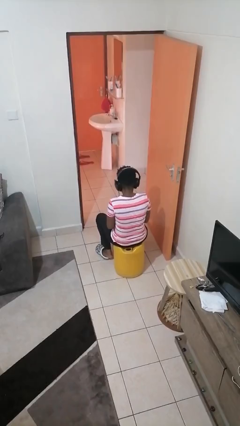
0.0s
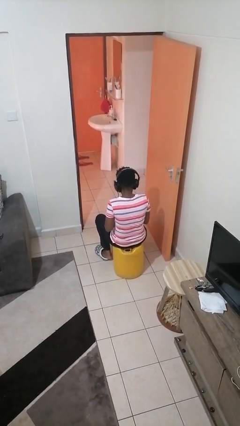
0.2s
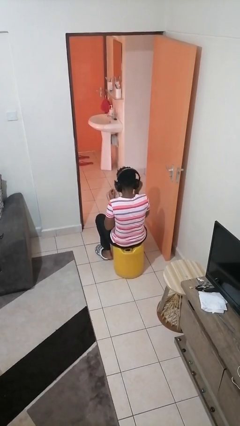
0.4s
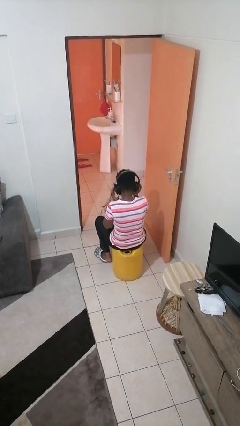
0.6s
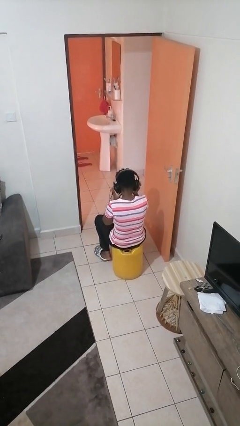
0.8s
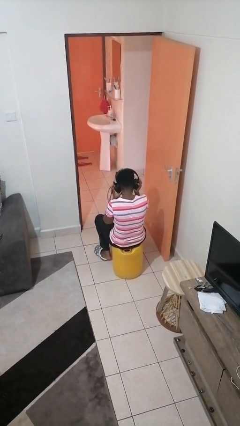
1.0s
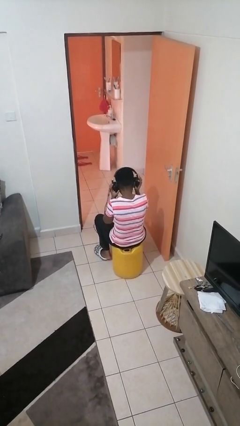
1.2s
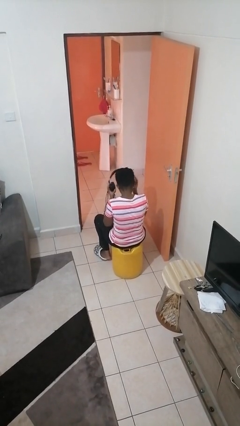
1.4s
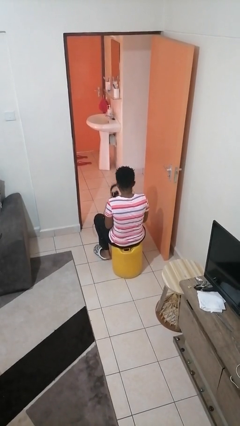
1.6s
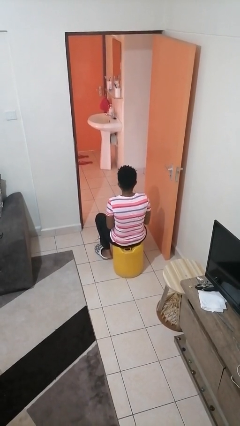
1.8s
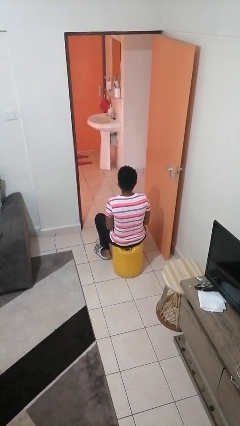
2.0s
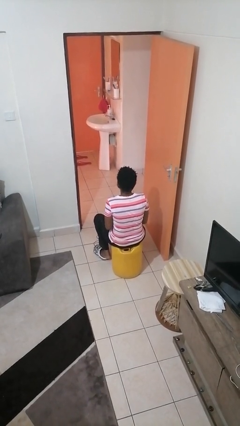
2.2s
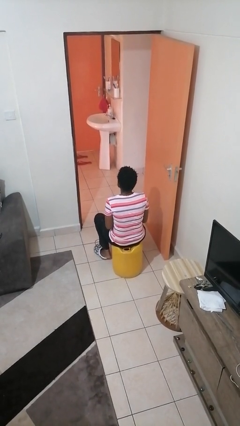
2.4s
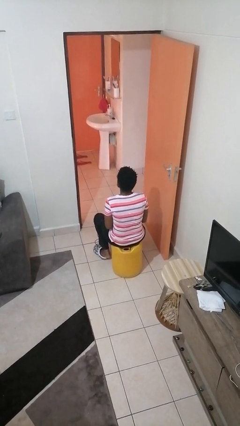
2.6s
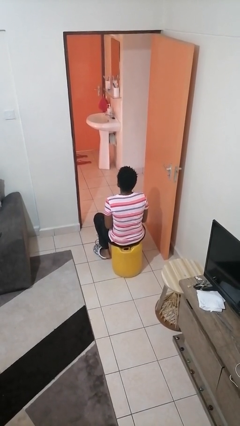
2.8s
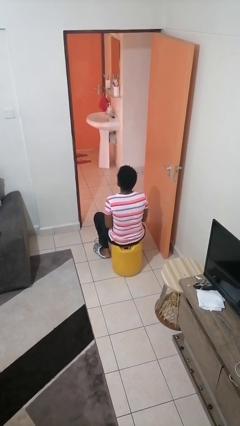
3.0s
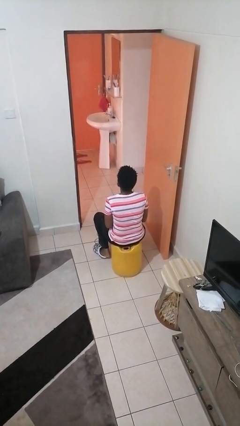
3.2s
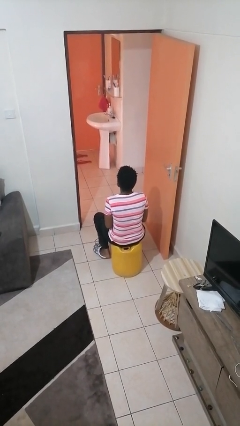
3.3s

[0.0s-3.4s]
person takes off headphones

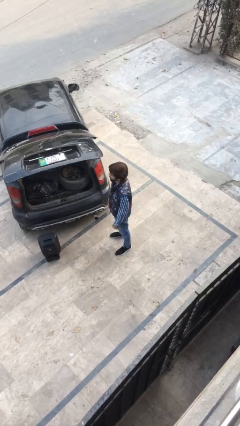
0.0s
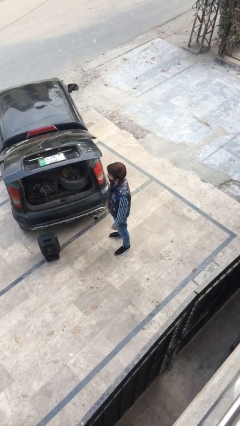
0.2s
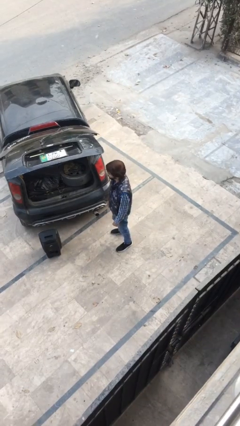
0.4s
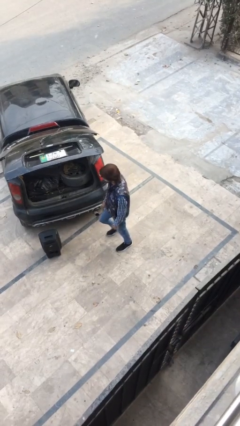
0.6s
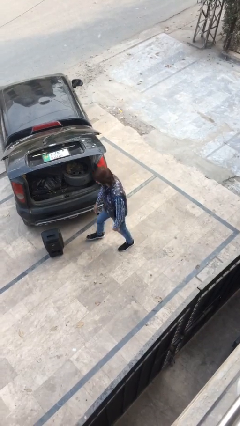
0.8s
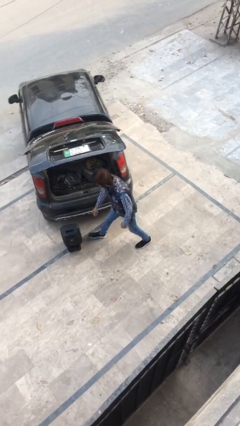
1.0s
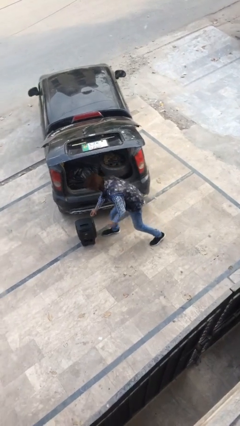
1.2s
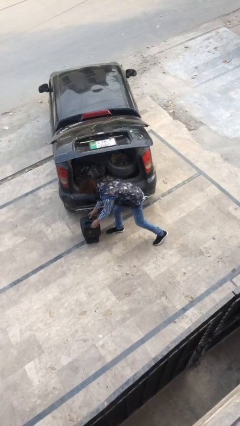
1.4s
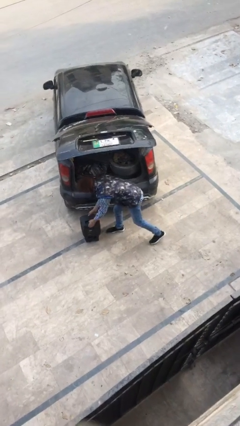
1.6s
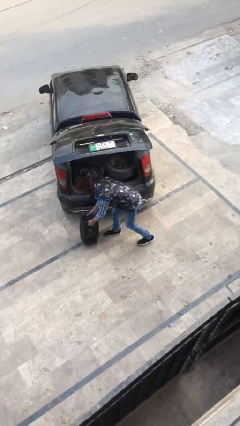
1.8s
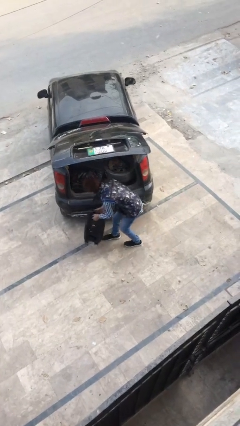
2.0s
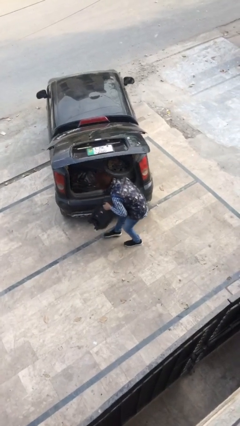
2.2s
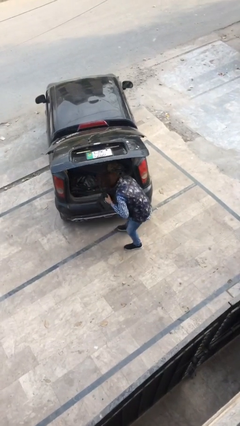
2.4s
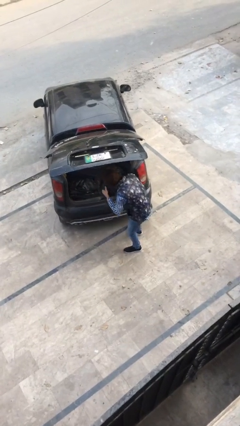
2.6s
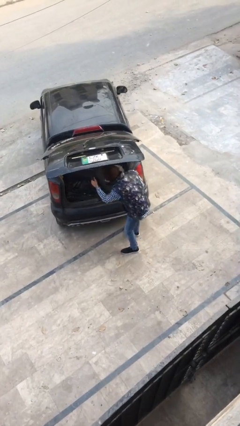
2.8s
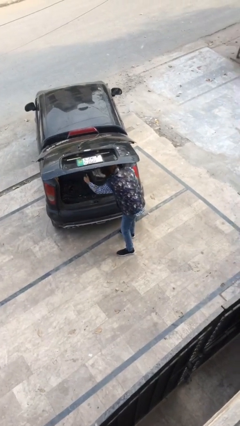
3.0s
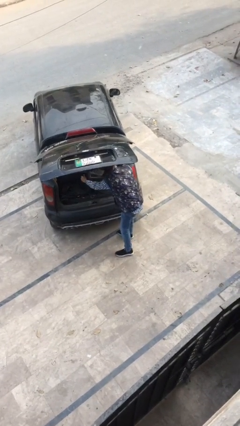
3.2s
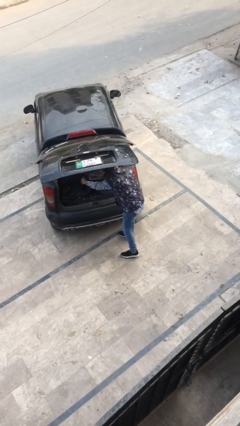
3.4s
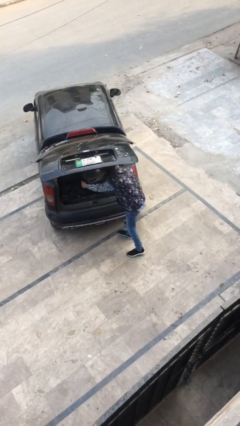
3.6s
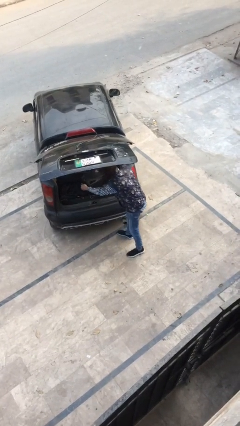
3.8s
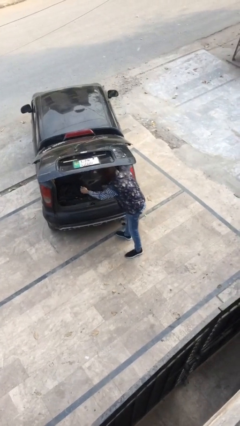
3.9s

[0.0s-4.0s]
person loads car

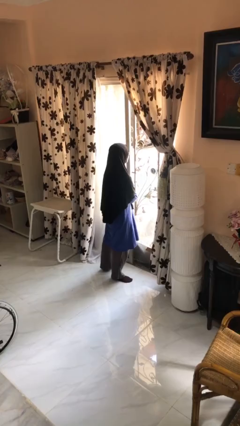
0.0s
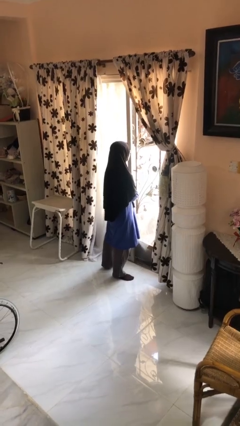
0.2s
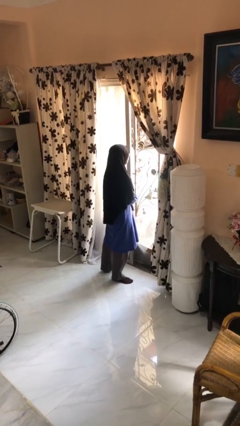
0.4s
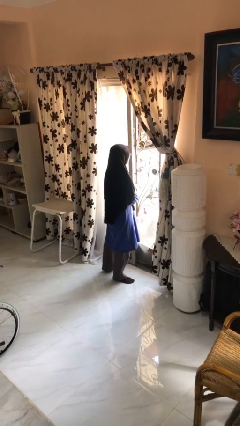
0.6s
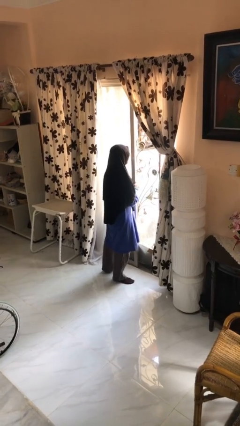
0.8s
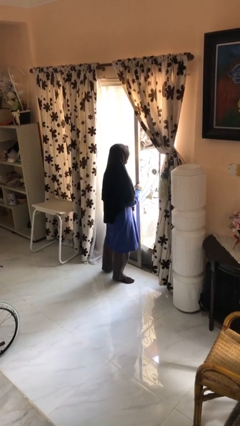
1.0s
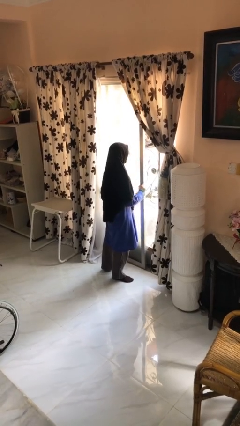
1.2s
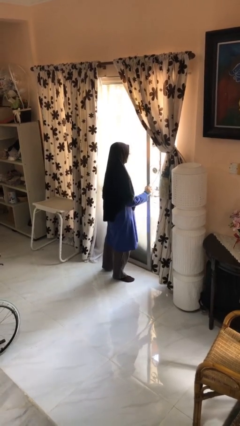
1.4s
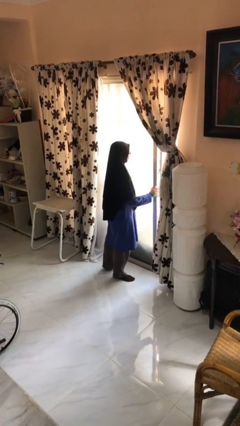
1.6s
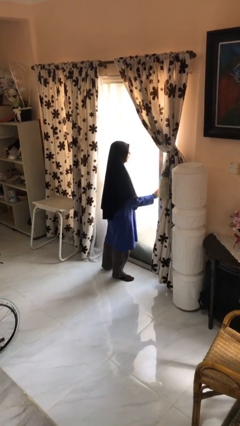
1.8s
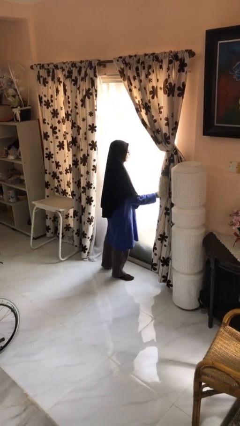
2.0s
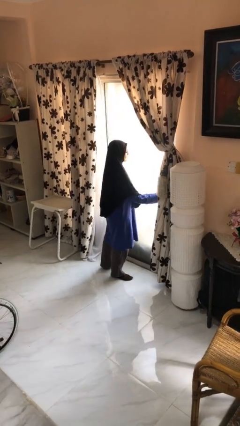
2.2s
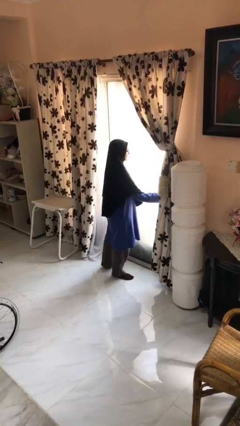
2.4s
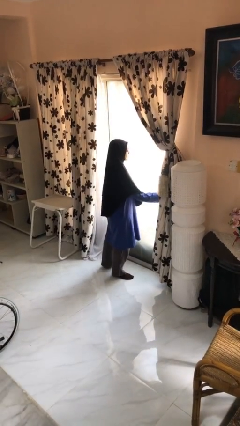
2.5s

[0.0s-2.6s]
person closes sliding door

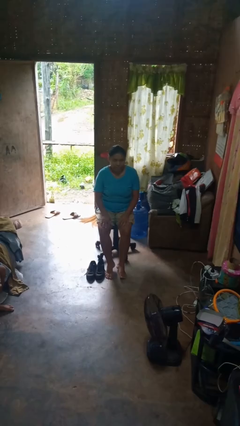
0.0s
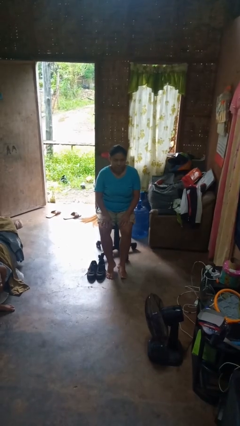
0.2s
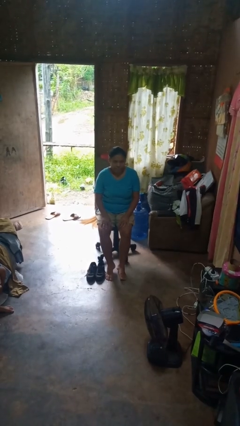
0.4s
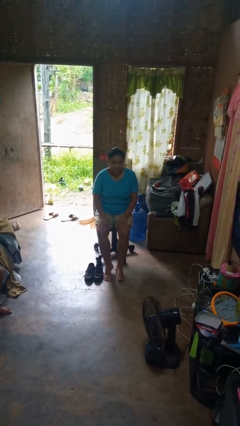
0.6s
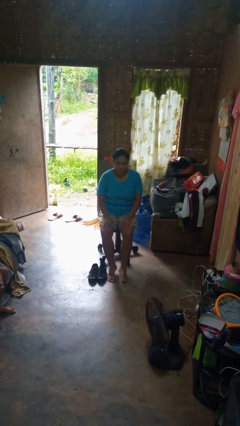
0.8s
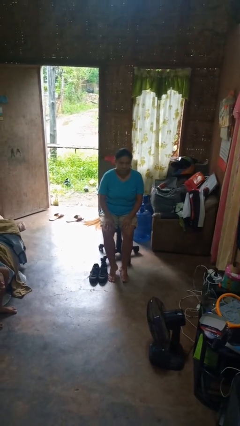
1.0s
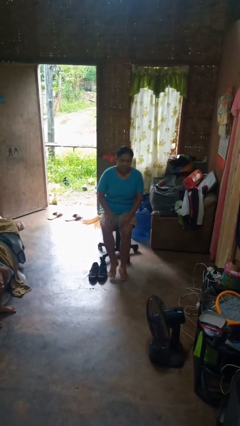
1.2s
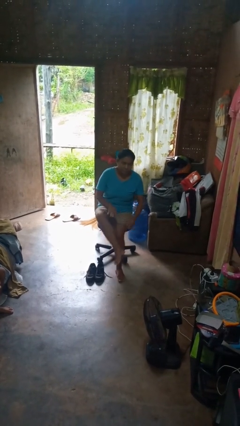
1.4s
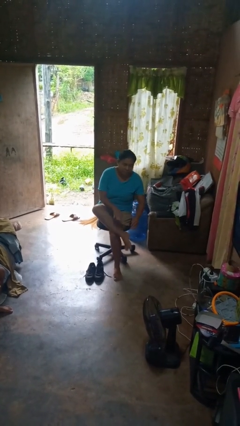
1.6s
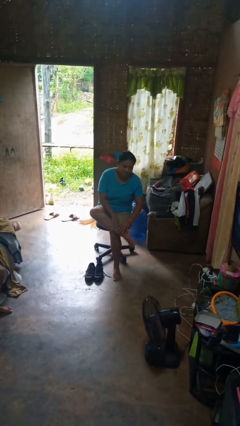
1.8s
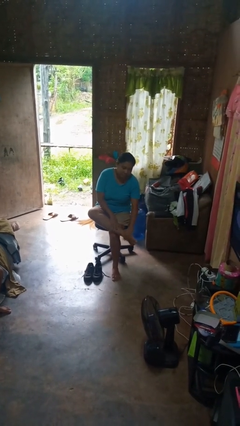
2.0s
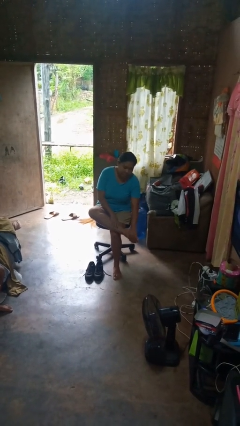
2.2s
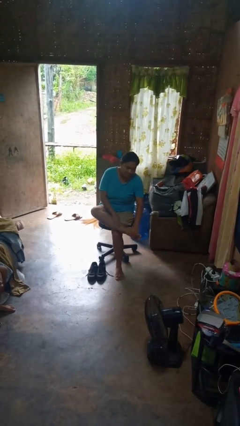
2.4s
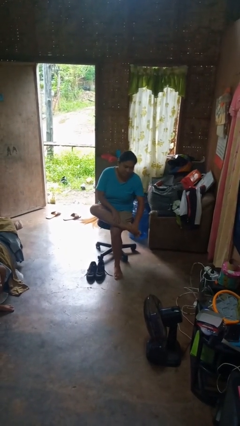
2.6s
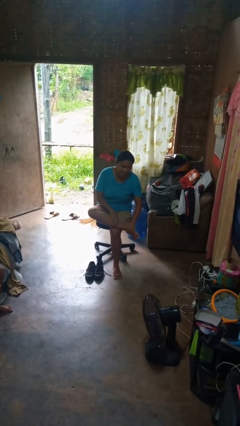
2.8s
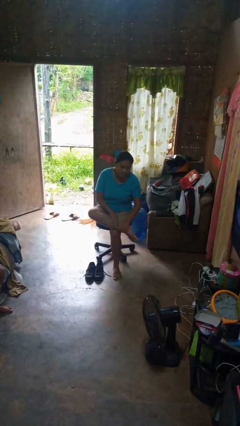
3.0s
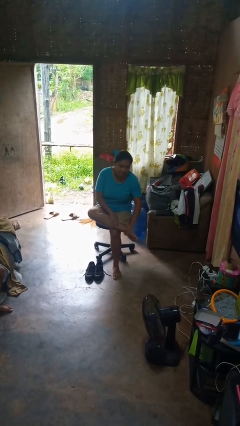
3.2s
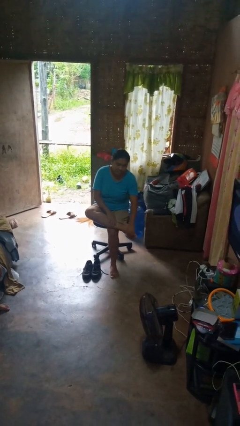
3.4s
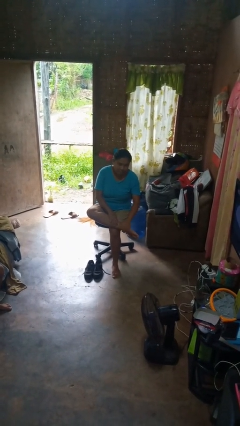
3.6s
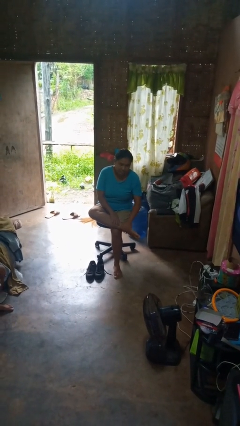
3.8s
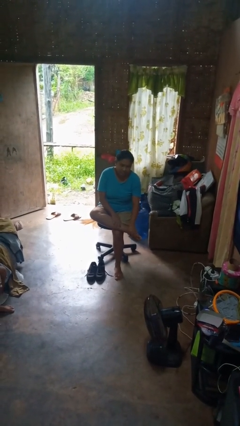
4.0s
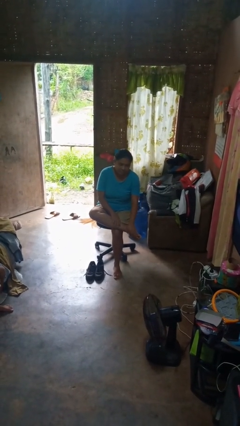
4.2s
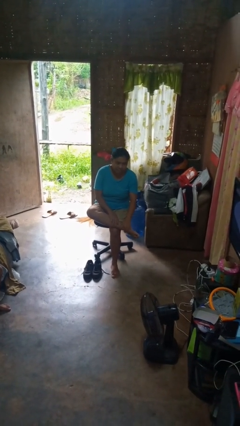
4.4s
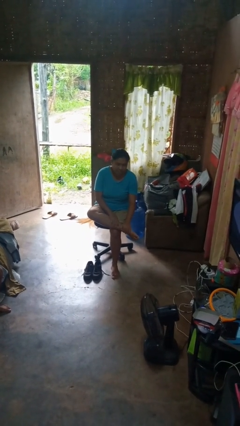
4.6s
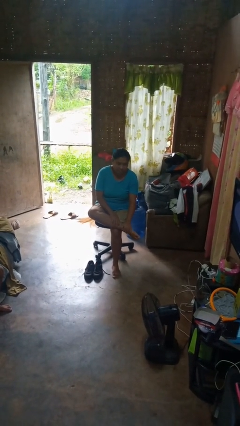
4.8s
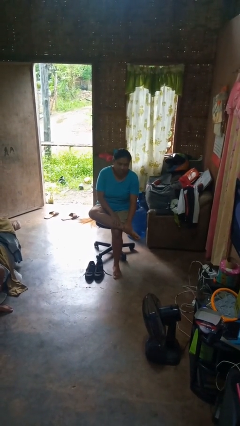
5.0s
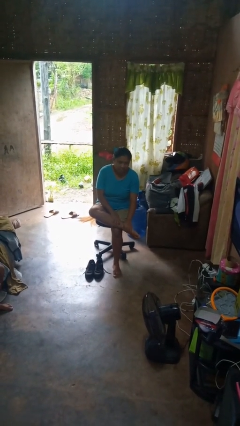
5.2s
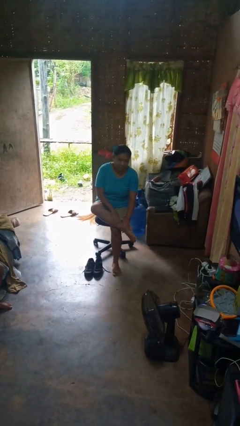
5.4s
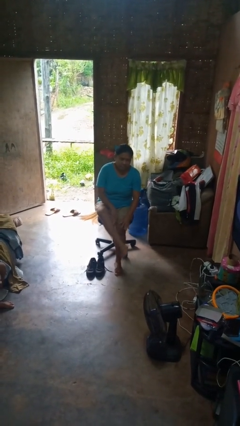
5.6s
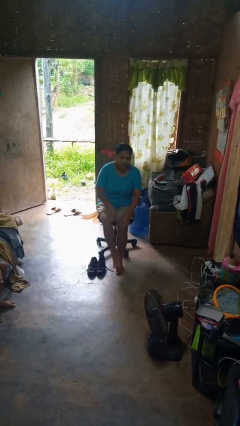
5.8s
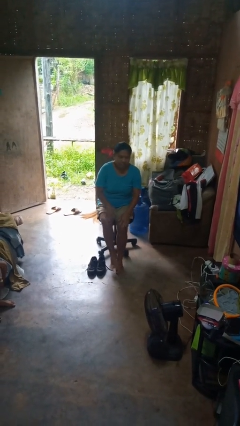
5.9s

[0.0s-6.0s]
person rubs foot

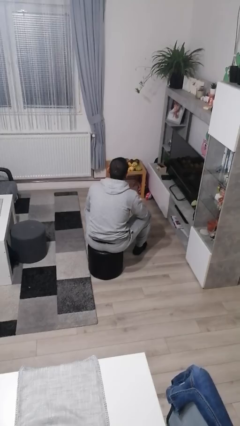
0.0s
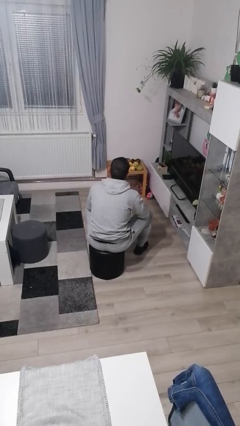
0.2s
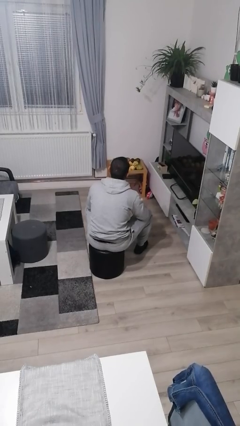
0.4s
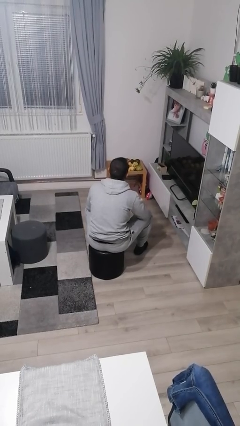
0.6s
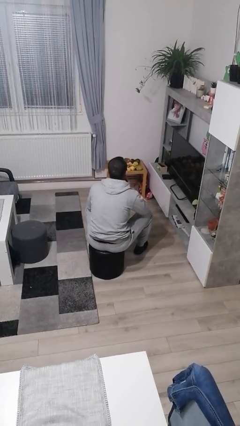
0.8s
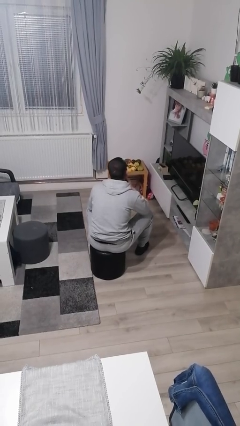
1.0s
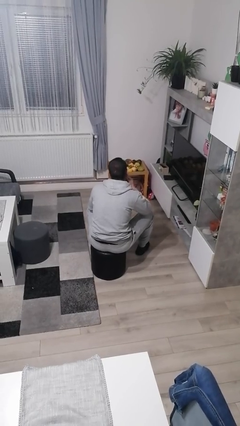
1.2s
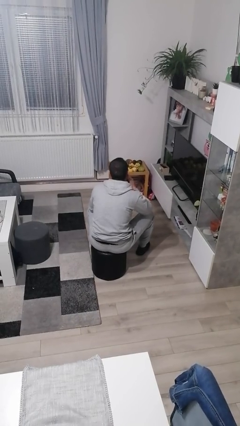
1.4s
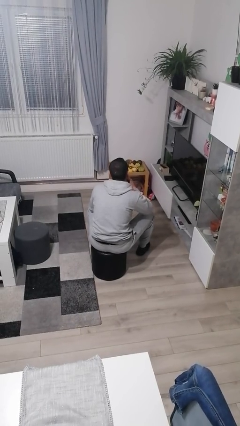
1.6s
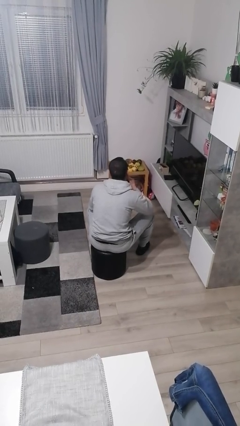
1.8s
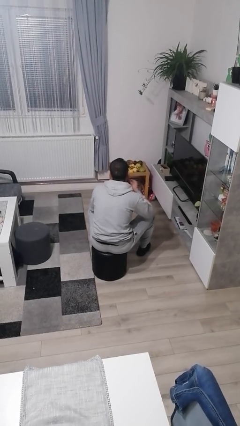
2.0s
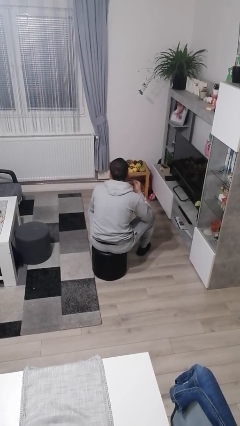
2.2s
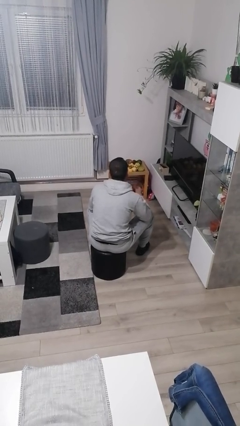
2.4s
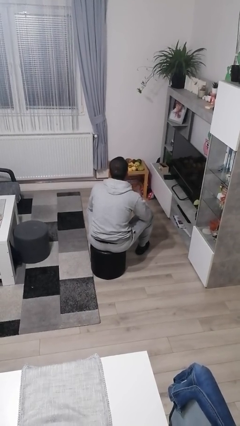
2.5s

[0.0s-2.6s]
person strokes chin
